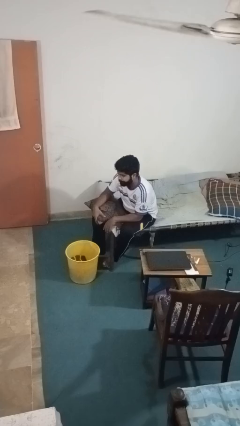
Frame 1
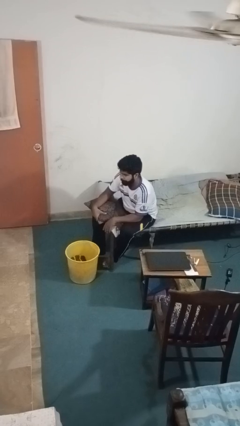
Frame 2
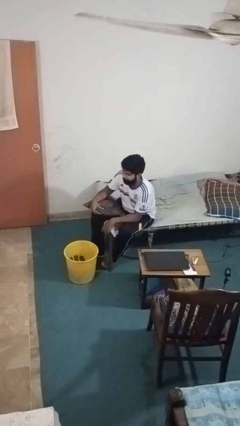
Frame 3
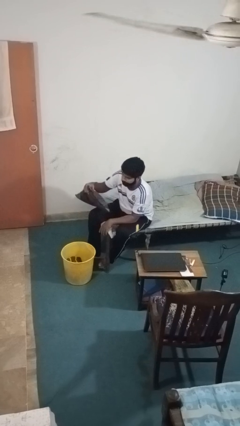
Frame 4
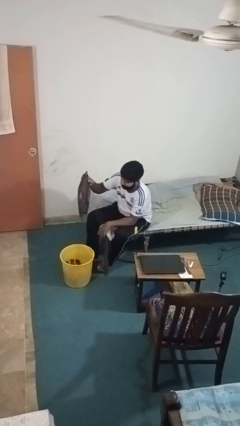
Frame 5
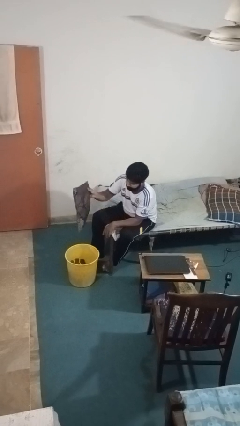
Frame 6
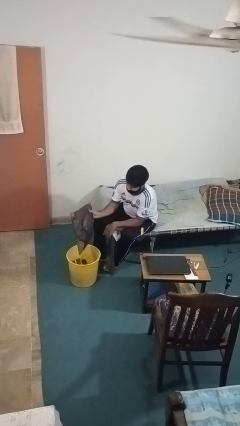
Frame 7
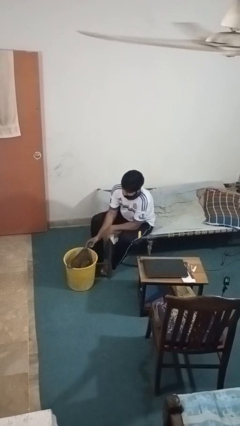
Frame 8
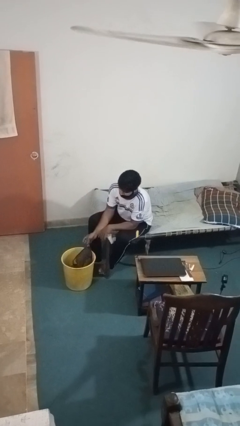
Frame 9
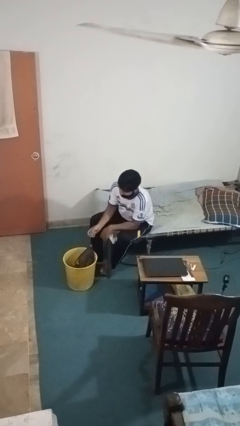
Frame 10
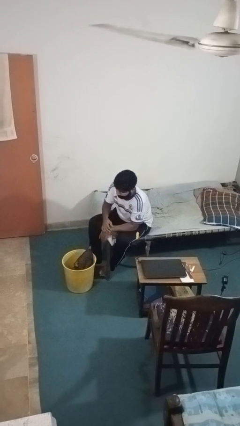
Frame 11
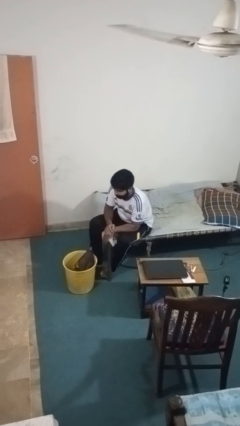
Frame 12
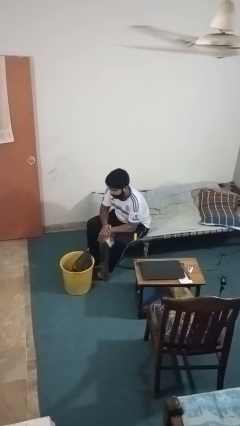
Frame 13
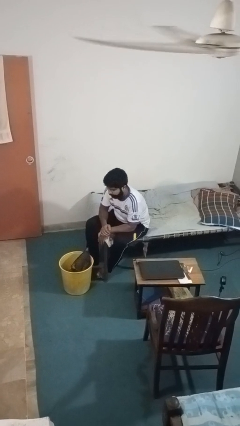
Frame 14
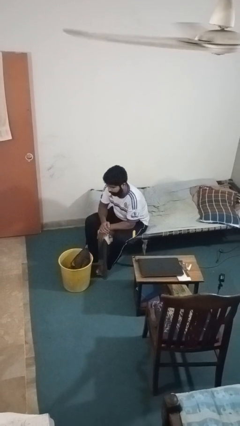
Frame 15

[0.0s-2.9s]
person puts object into basket

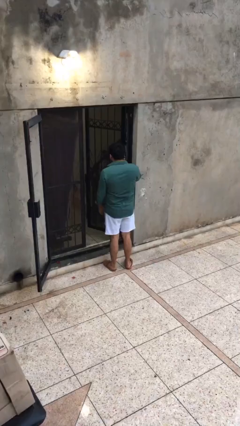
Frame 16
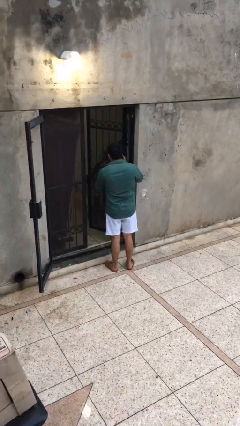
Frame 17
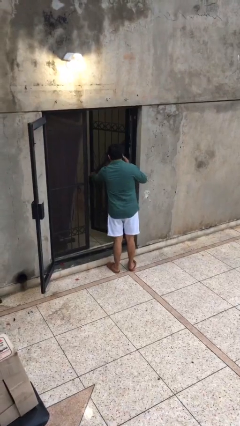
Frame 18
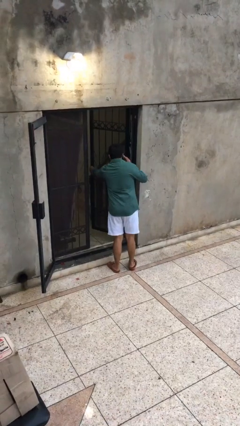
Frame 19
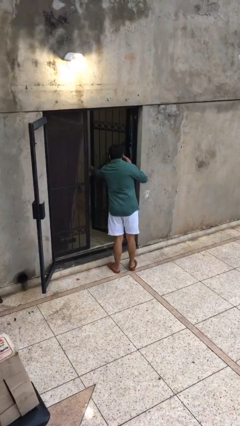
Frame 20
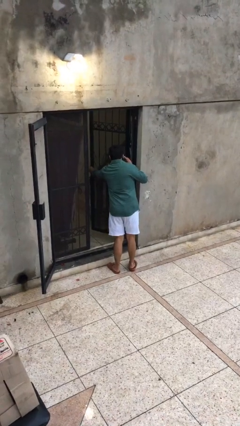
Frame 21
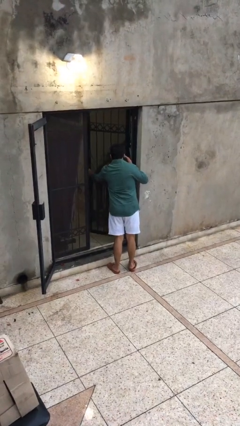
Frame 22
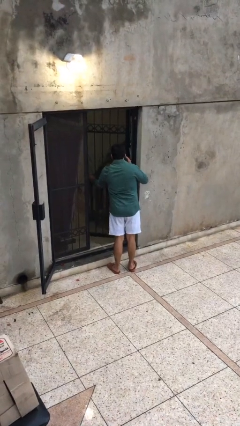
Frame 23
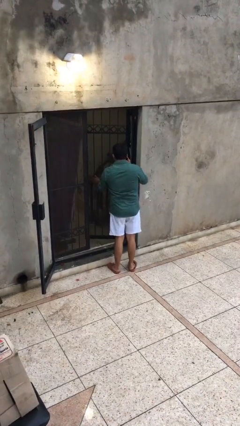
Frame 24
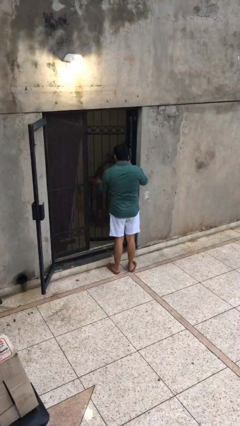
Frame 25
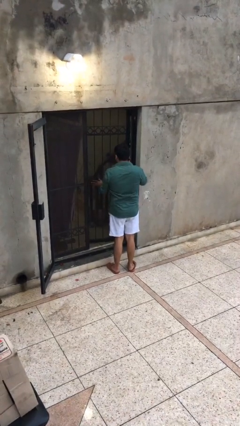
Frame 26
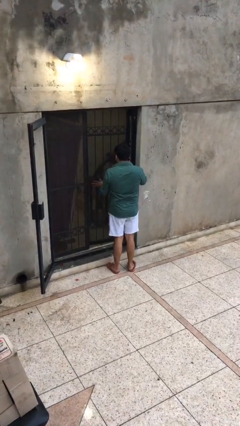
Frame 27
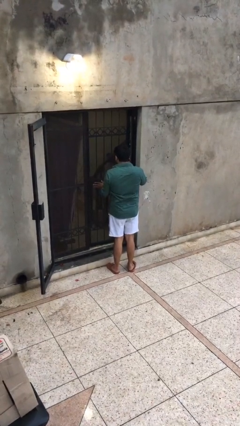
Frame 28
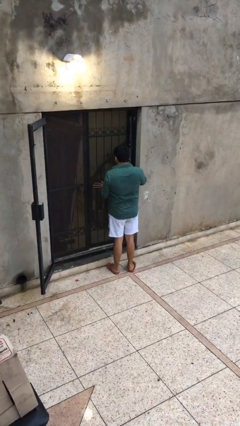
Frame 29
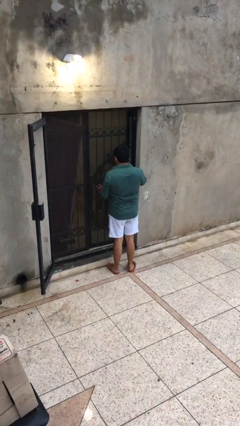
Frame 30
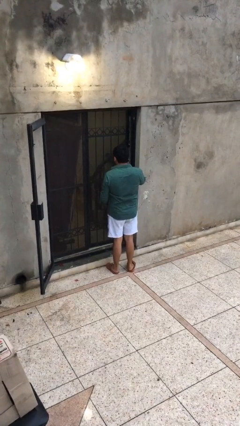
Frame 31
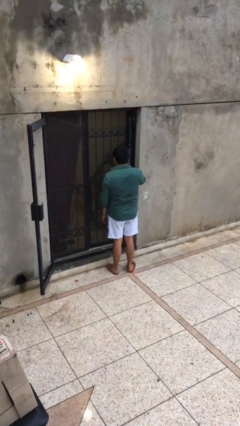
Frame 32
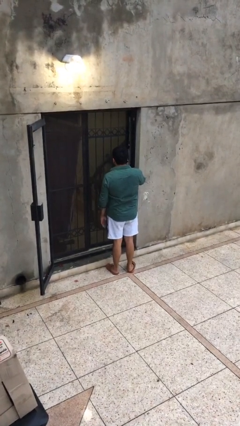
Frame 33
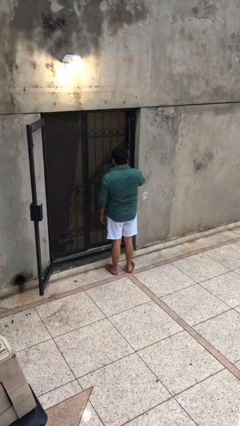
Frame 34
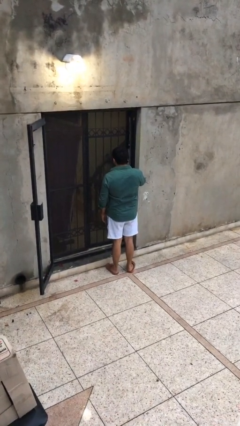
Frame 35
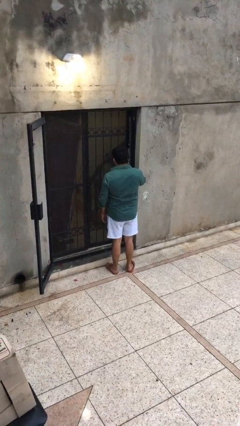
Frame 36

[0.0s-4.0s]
person closes facility door

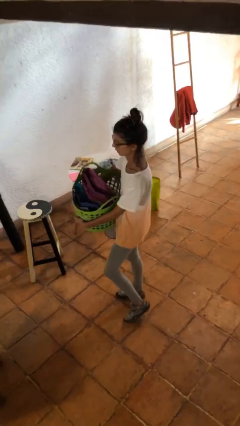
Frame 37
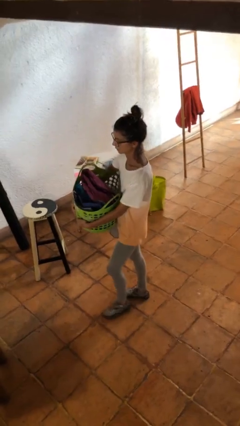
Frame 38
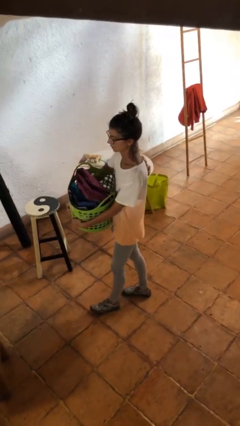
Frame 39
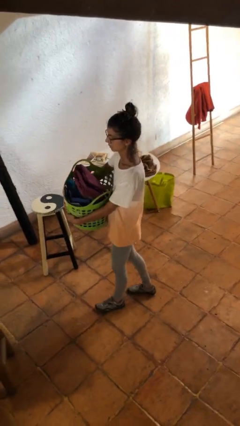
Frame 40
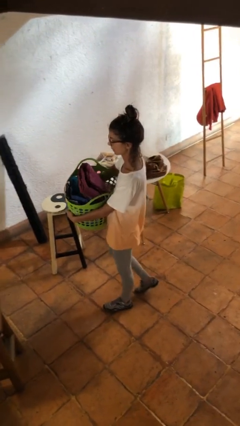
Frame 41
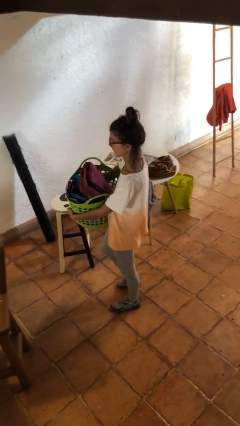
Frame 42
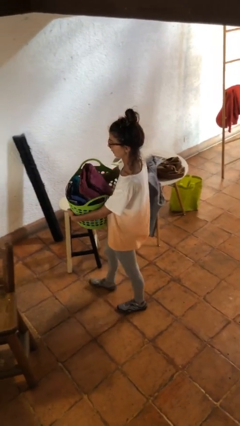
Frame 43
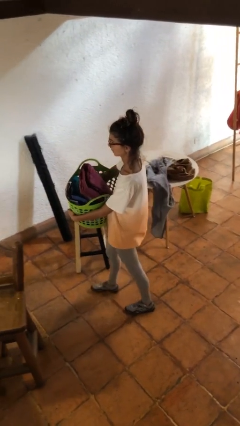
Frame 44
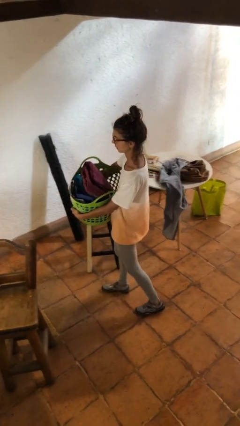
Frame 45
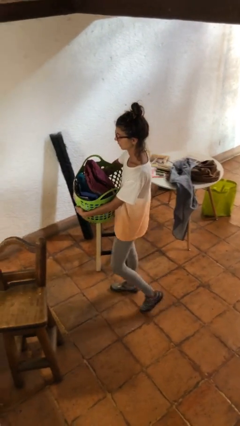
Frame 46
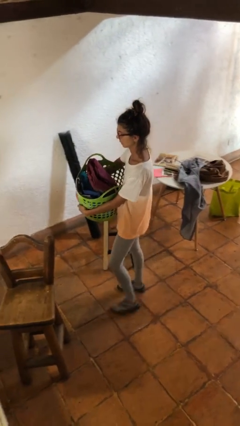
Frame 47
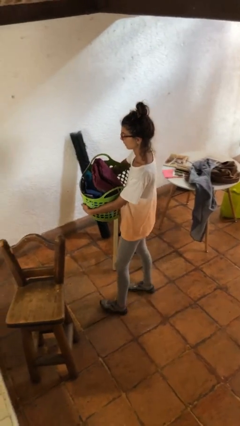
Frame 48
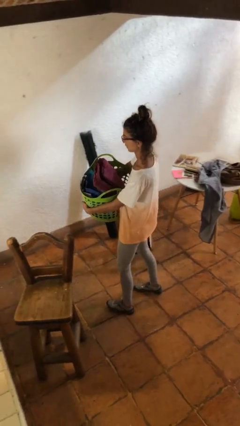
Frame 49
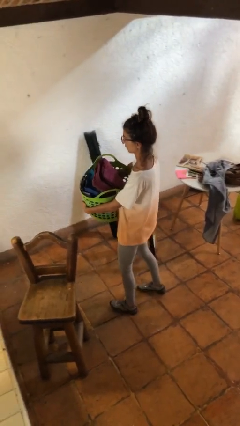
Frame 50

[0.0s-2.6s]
person carries laundry basket

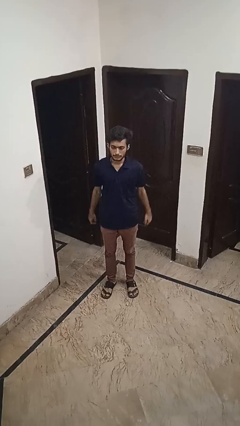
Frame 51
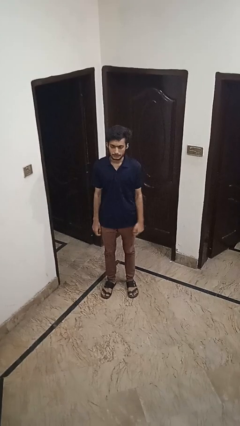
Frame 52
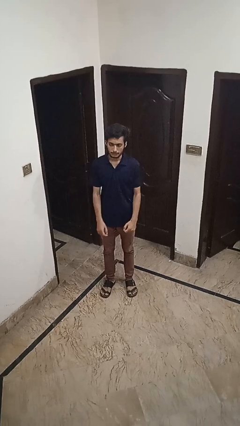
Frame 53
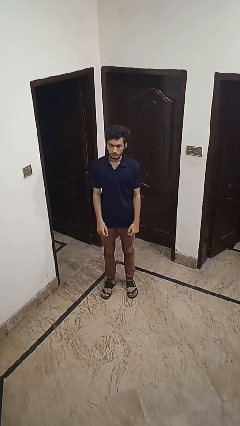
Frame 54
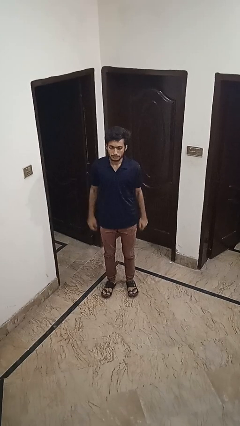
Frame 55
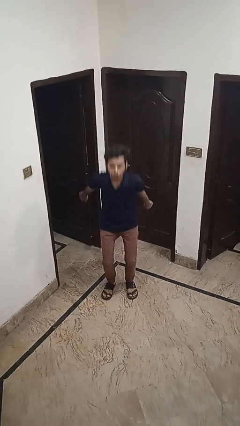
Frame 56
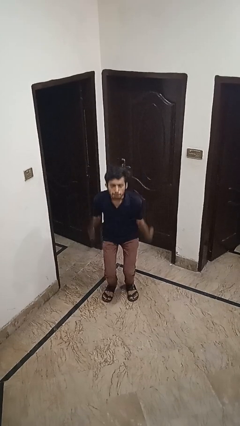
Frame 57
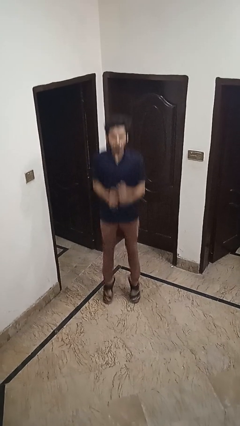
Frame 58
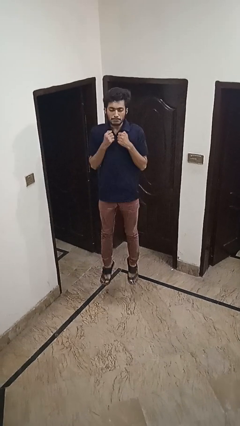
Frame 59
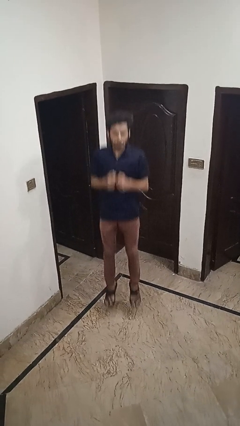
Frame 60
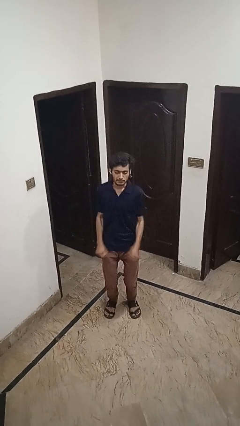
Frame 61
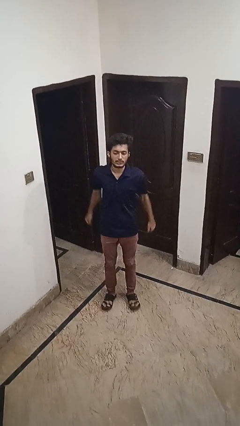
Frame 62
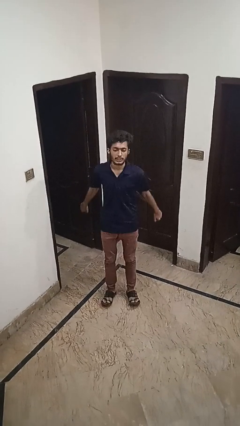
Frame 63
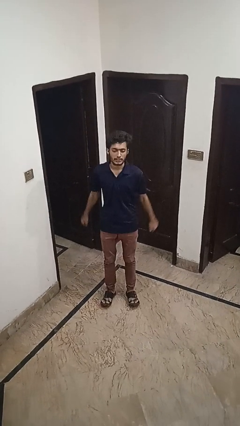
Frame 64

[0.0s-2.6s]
person jumps

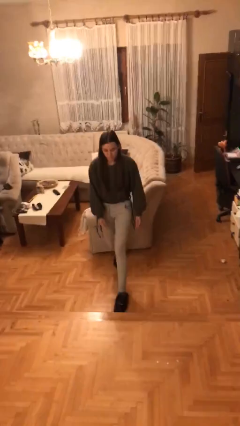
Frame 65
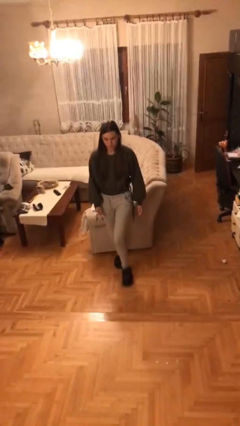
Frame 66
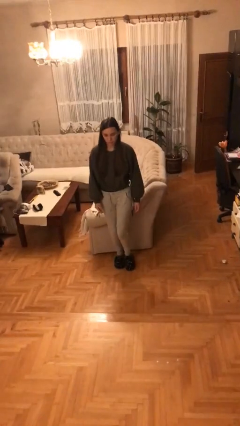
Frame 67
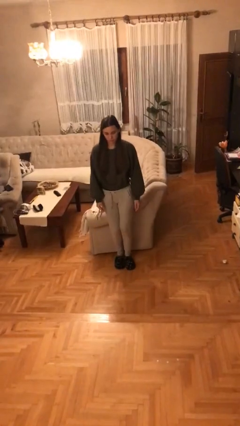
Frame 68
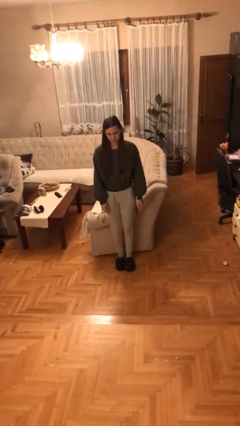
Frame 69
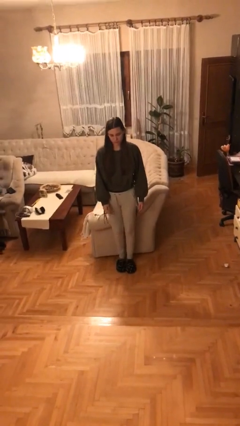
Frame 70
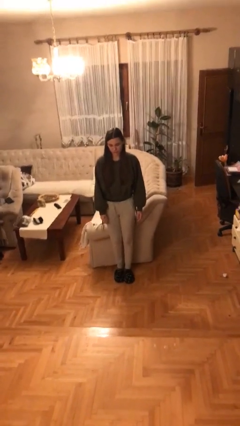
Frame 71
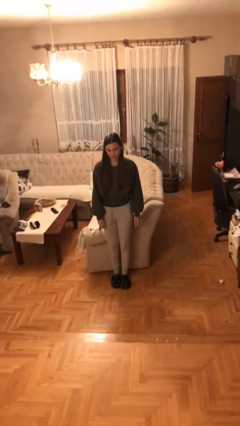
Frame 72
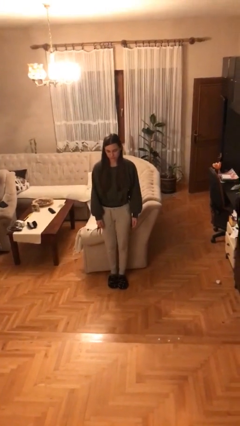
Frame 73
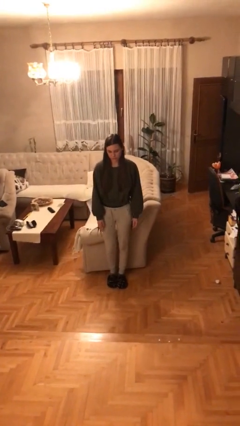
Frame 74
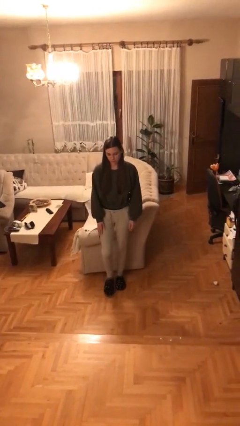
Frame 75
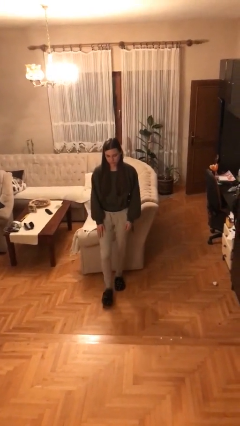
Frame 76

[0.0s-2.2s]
person stands up from floor

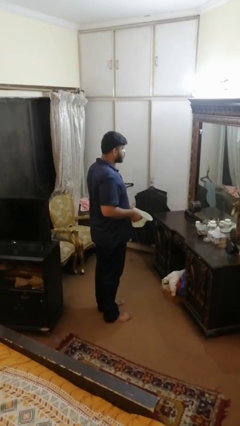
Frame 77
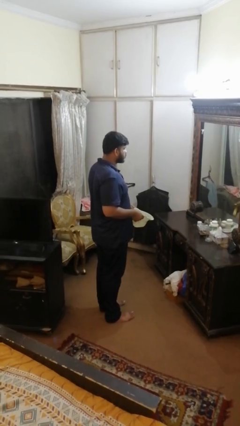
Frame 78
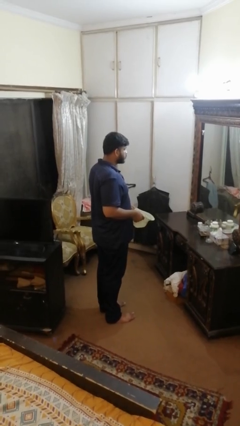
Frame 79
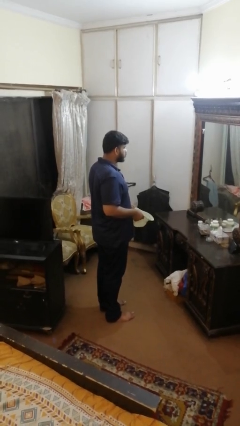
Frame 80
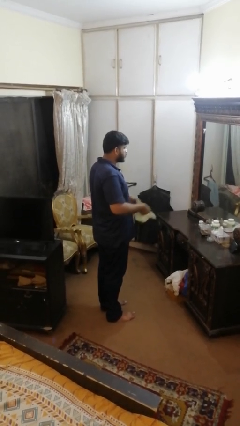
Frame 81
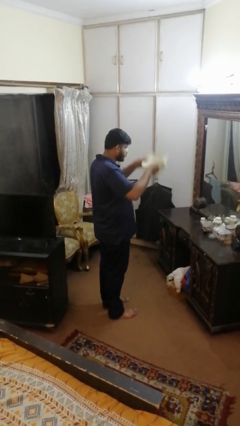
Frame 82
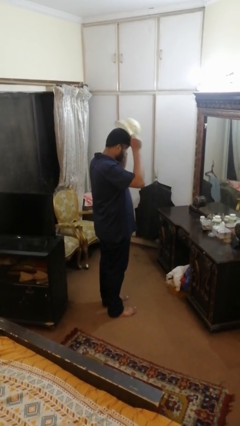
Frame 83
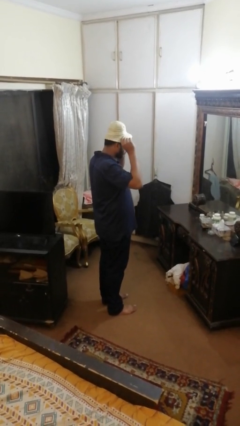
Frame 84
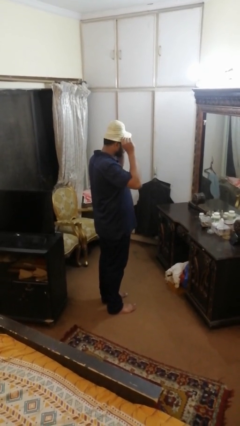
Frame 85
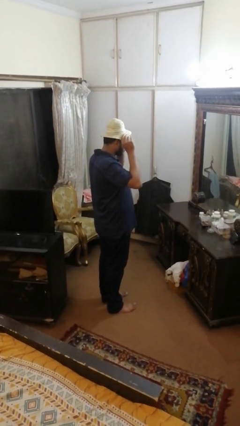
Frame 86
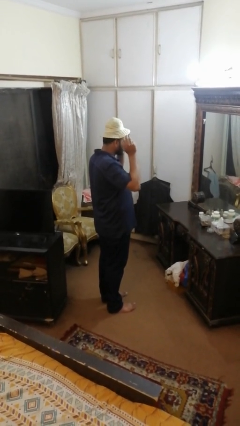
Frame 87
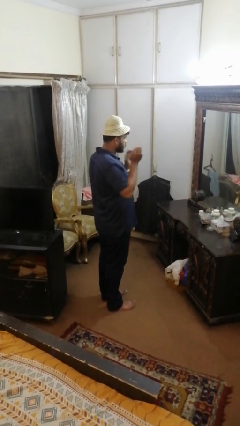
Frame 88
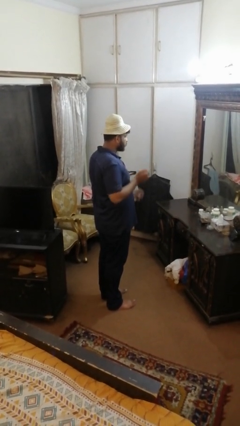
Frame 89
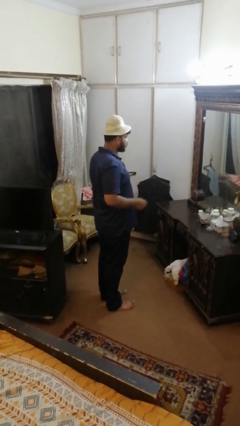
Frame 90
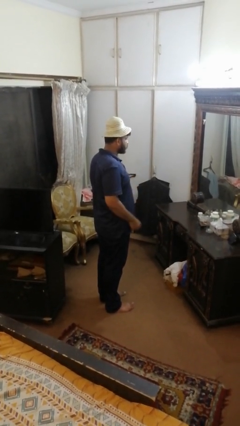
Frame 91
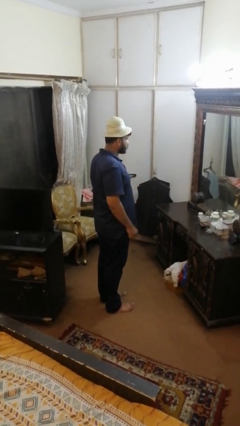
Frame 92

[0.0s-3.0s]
person puts on hat

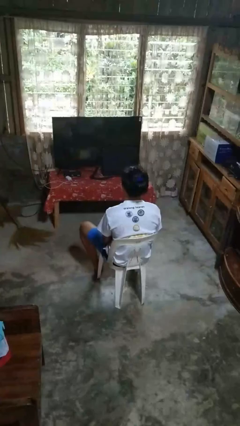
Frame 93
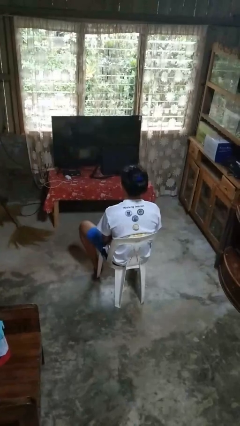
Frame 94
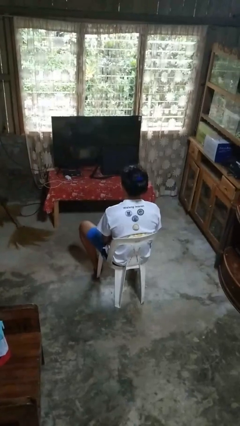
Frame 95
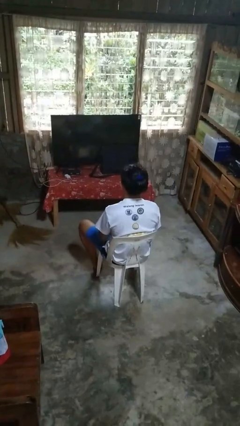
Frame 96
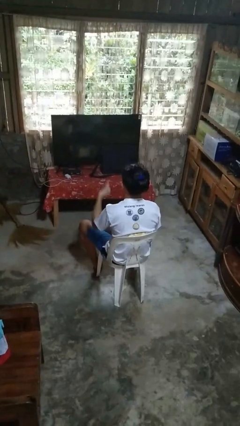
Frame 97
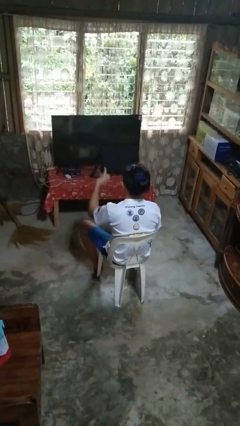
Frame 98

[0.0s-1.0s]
person gestures thumbs up
